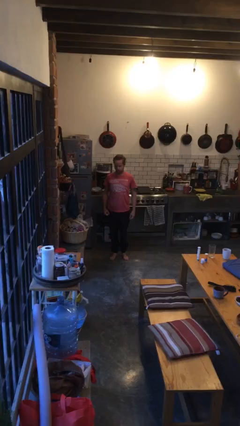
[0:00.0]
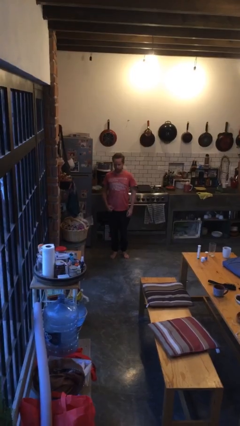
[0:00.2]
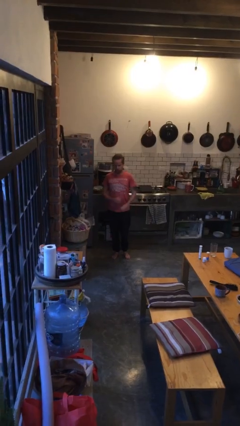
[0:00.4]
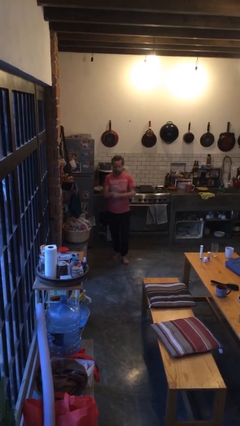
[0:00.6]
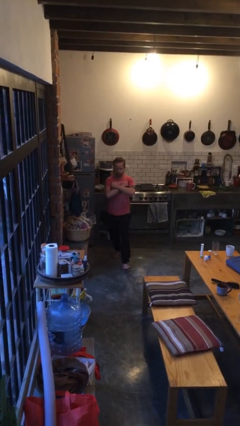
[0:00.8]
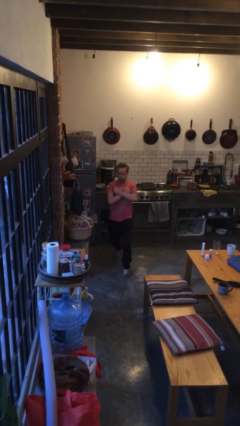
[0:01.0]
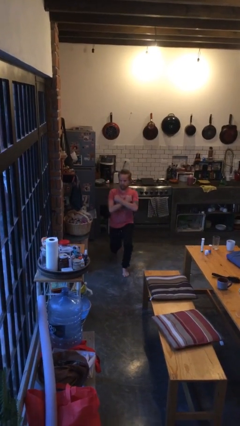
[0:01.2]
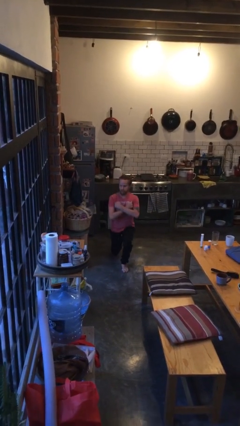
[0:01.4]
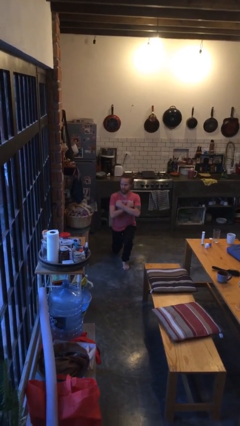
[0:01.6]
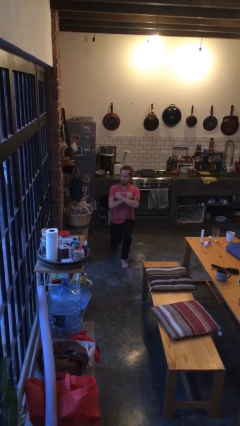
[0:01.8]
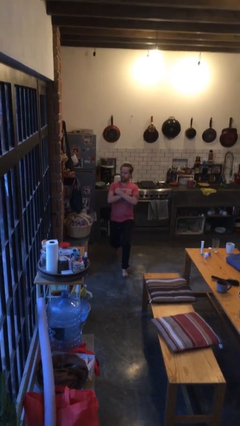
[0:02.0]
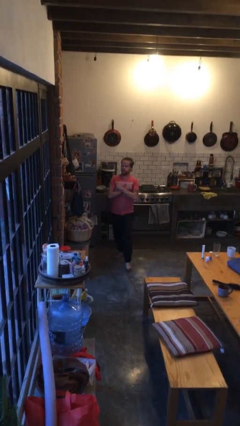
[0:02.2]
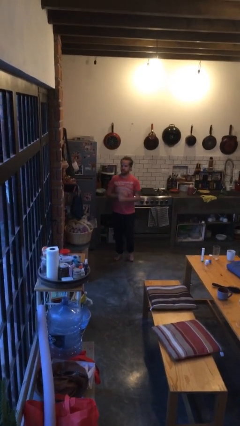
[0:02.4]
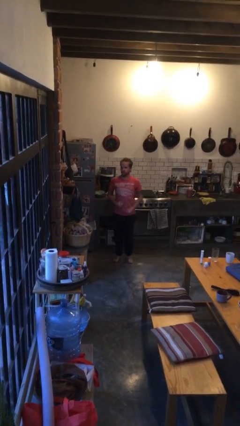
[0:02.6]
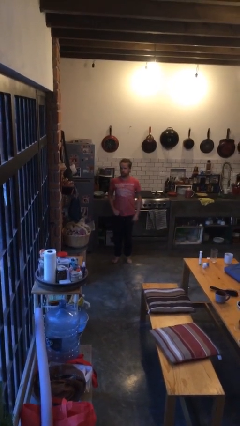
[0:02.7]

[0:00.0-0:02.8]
person exercises with lunges

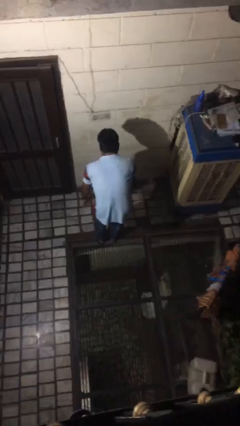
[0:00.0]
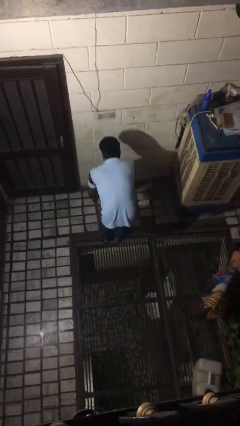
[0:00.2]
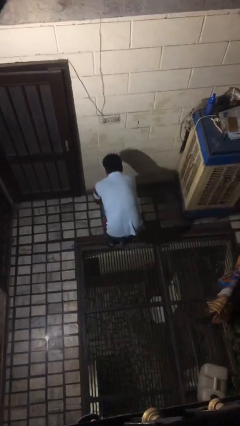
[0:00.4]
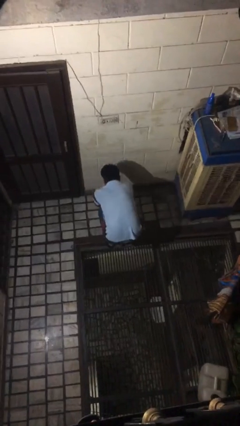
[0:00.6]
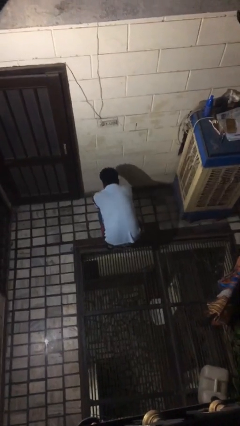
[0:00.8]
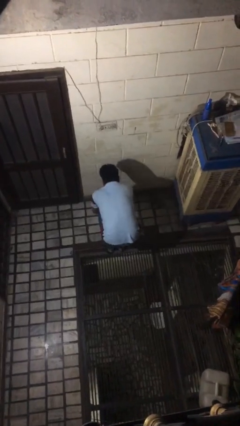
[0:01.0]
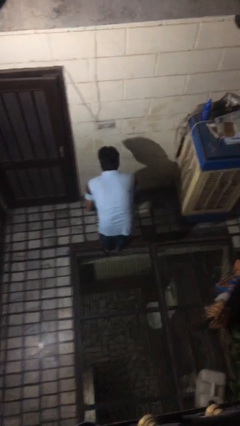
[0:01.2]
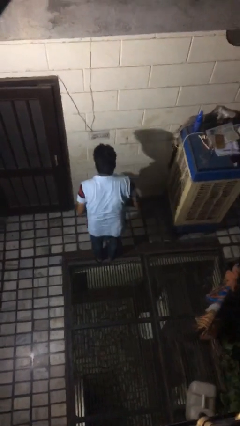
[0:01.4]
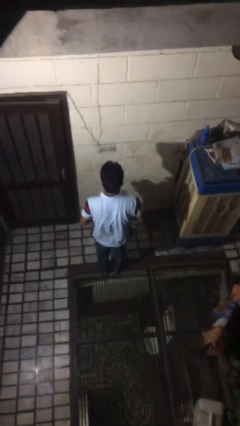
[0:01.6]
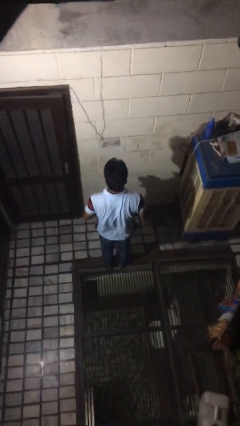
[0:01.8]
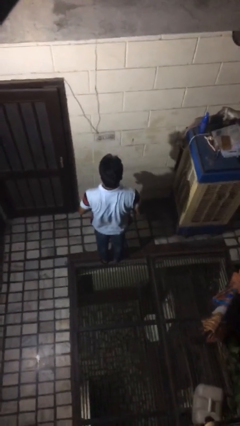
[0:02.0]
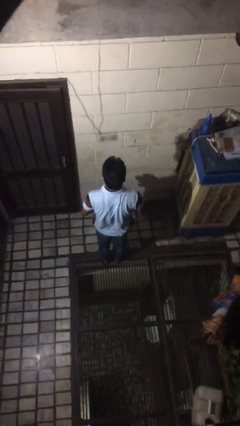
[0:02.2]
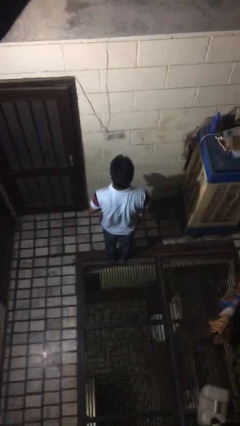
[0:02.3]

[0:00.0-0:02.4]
person picks up object from floor

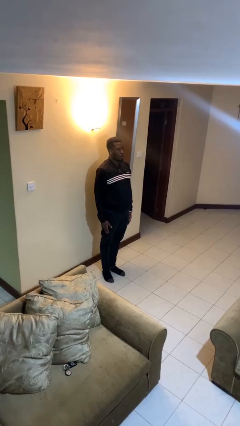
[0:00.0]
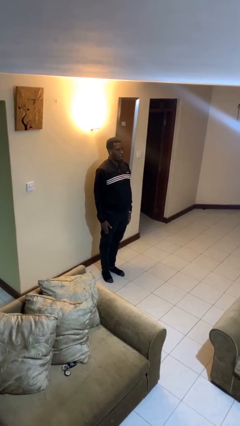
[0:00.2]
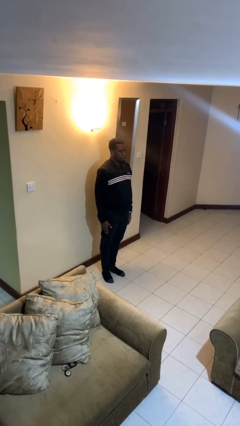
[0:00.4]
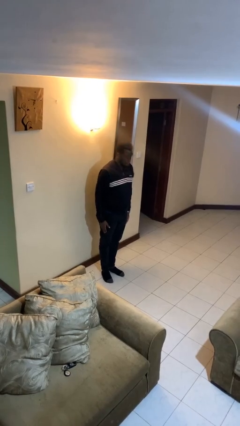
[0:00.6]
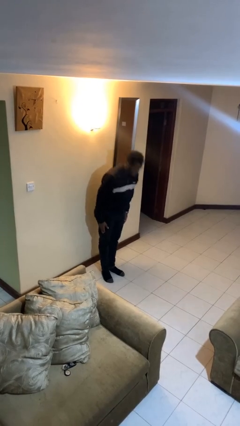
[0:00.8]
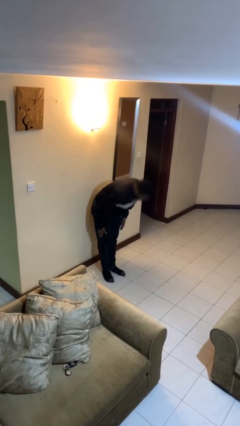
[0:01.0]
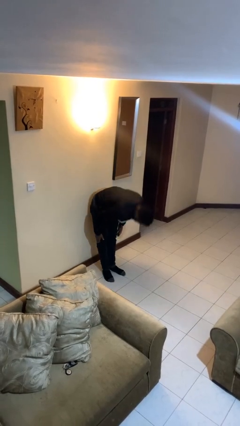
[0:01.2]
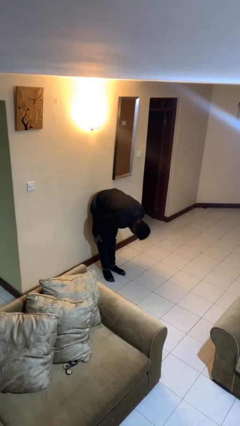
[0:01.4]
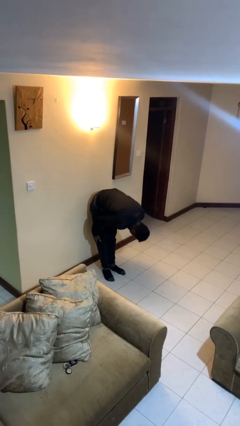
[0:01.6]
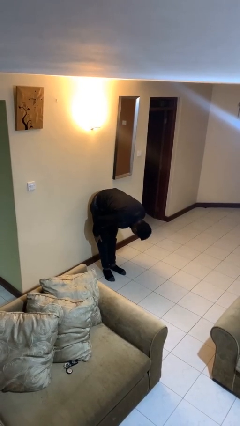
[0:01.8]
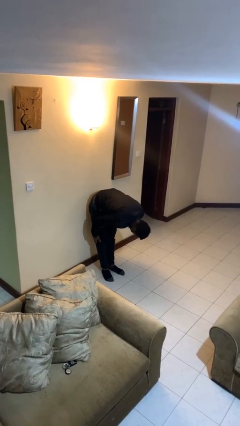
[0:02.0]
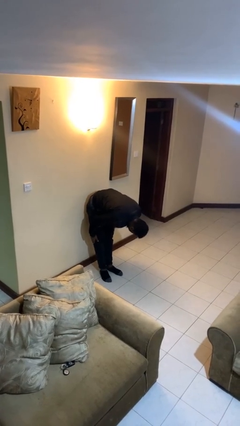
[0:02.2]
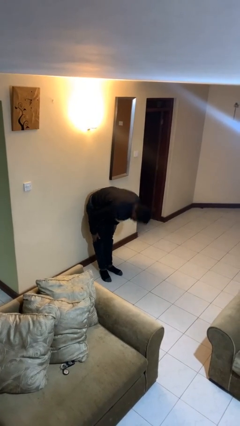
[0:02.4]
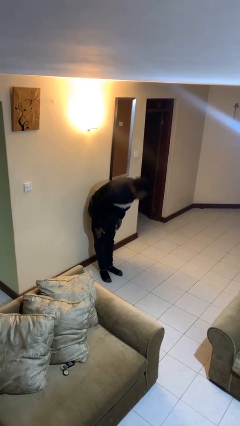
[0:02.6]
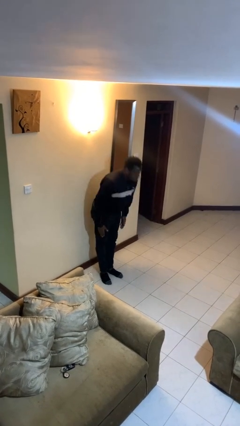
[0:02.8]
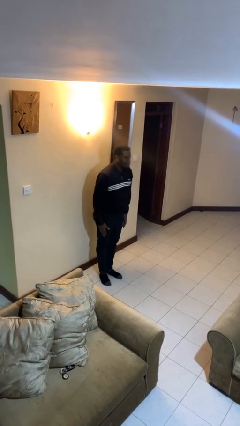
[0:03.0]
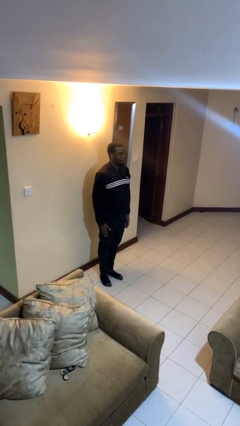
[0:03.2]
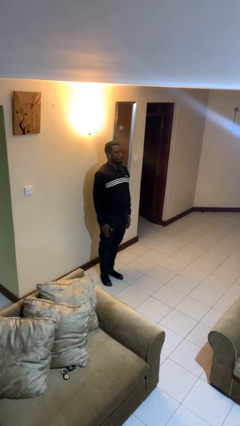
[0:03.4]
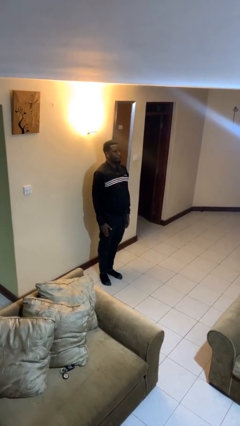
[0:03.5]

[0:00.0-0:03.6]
person bows

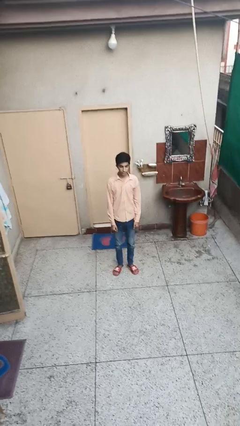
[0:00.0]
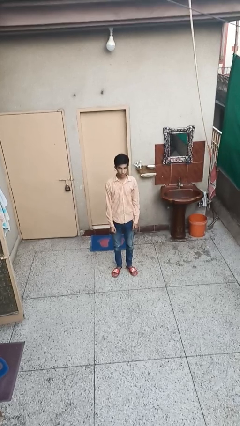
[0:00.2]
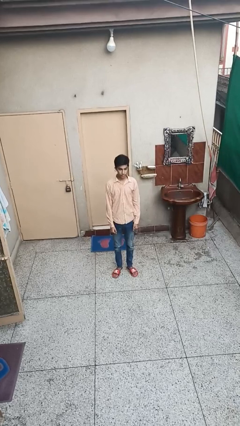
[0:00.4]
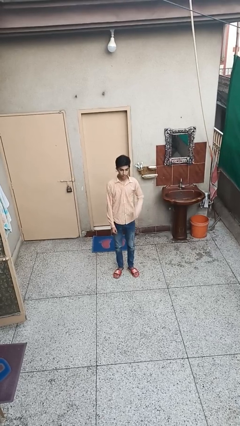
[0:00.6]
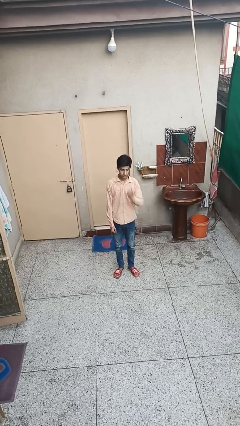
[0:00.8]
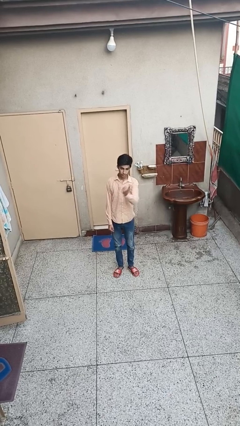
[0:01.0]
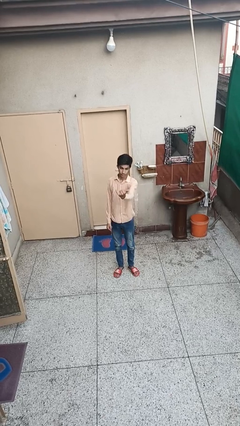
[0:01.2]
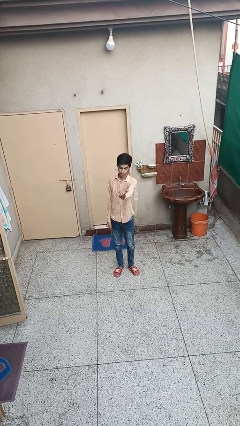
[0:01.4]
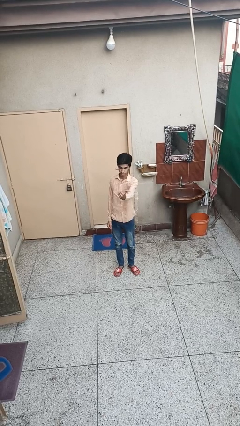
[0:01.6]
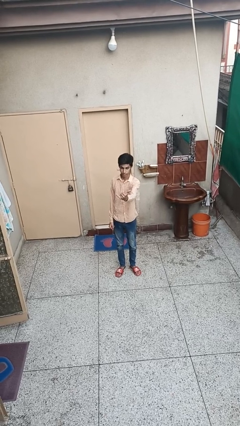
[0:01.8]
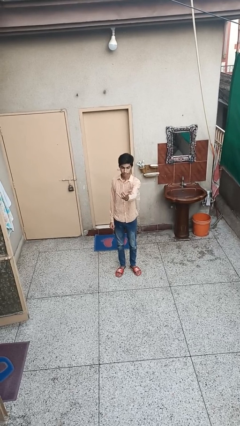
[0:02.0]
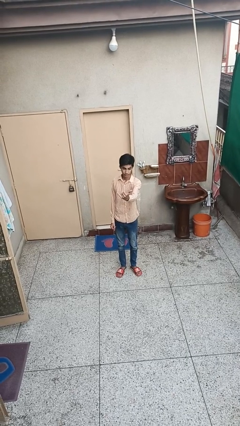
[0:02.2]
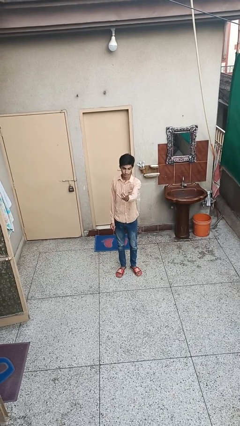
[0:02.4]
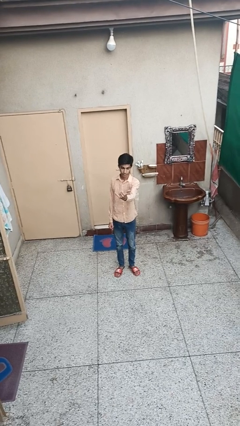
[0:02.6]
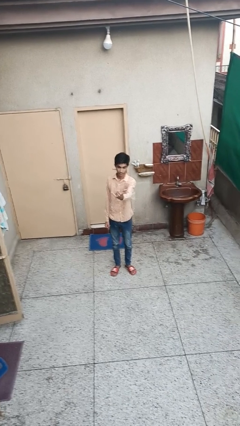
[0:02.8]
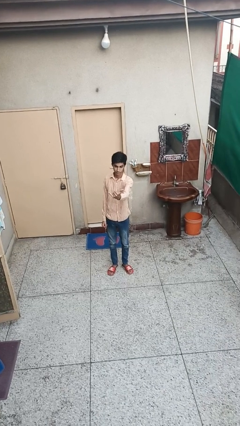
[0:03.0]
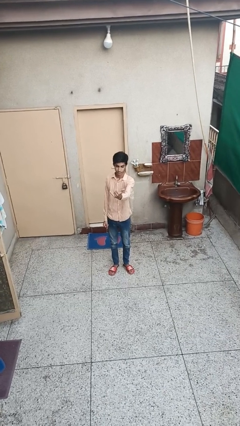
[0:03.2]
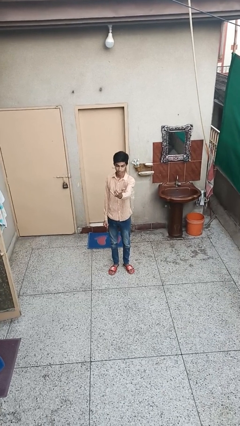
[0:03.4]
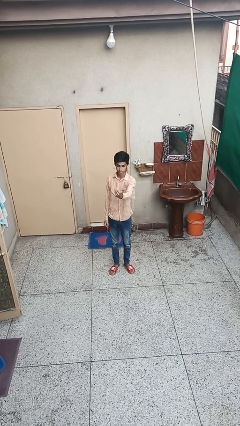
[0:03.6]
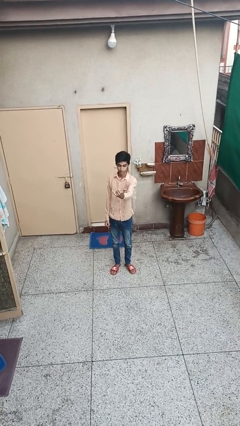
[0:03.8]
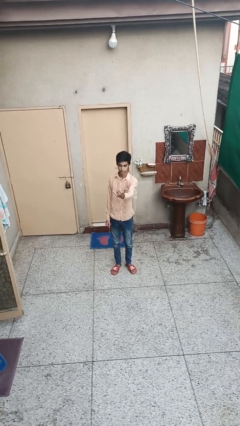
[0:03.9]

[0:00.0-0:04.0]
person gestures hang loose

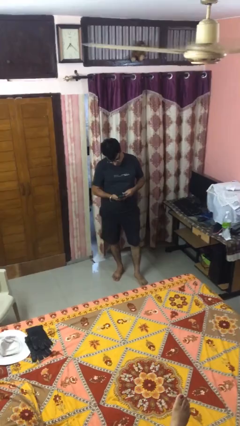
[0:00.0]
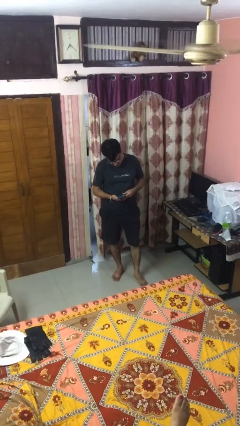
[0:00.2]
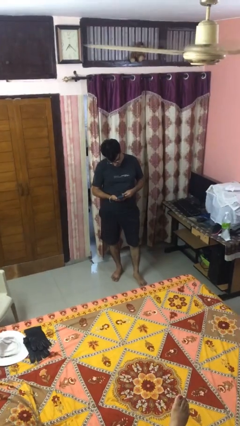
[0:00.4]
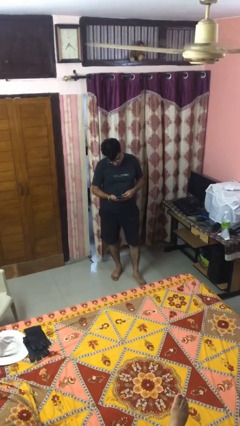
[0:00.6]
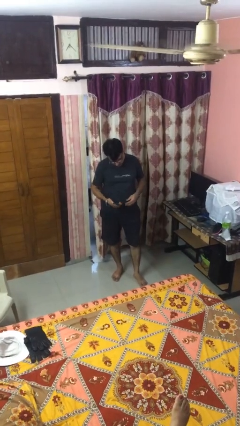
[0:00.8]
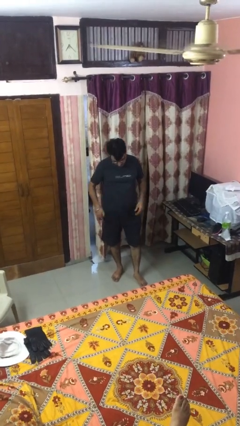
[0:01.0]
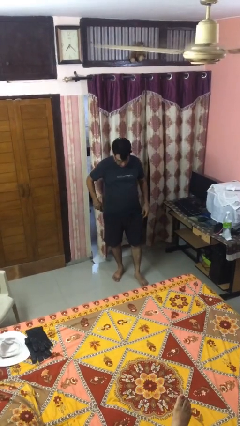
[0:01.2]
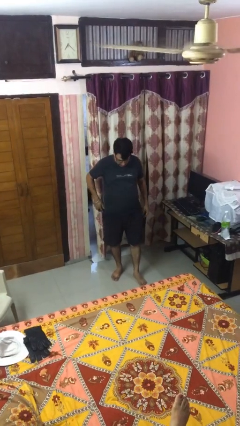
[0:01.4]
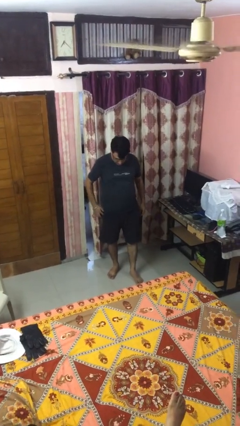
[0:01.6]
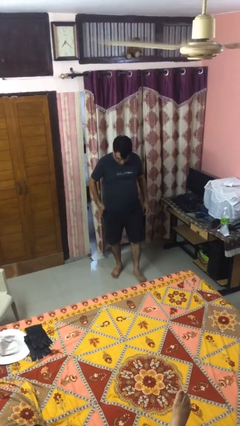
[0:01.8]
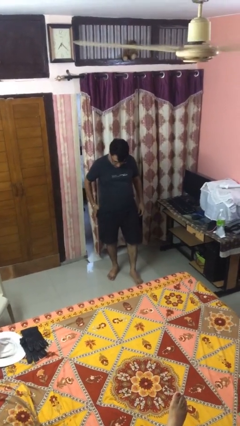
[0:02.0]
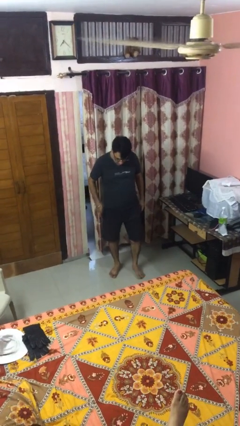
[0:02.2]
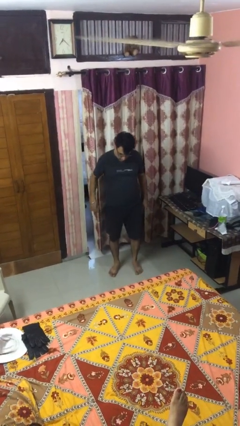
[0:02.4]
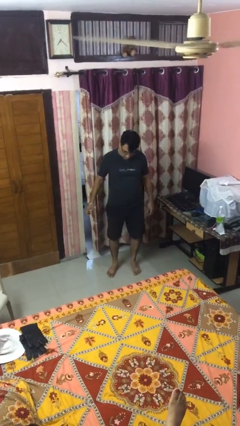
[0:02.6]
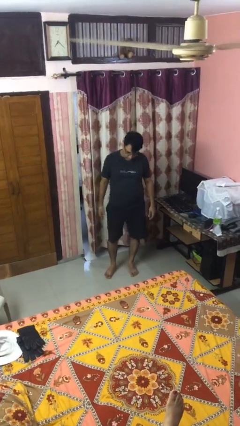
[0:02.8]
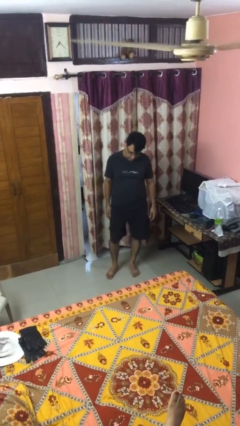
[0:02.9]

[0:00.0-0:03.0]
person puts phone into pocket

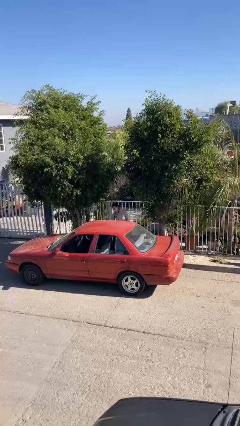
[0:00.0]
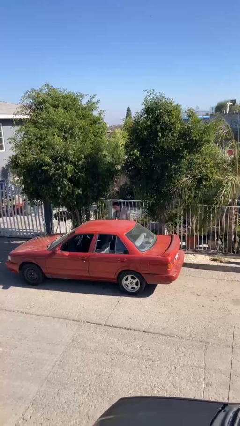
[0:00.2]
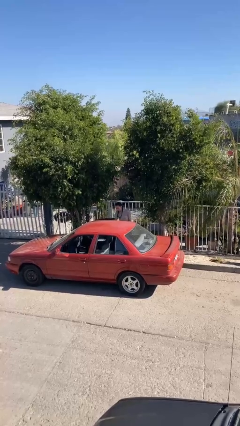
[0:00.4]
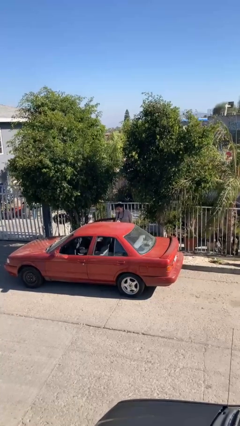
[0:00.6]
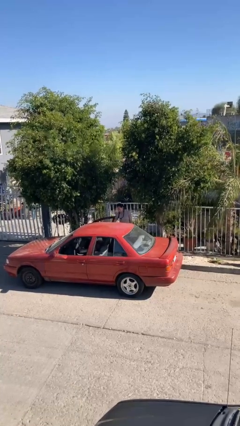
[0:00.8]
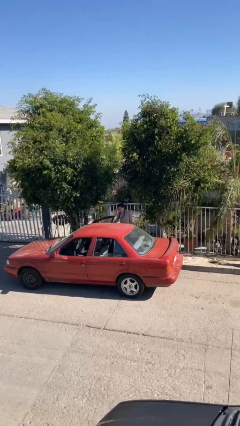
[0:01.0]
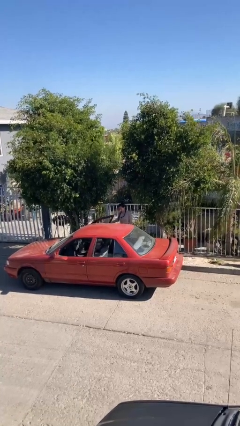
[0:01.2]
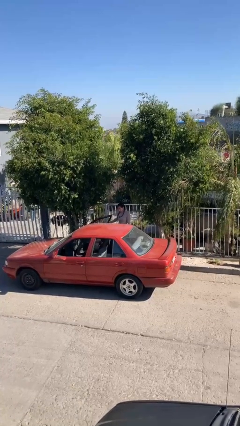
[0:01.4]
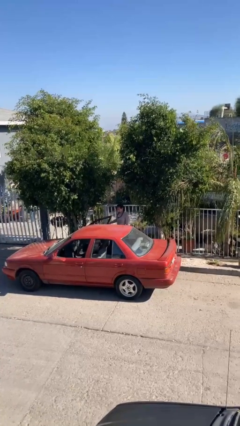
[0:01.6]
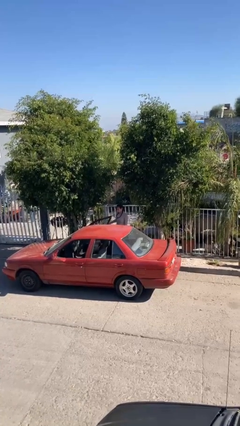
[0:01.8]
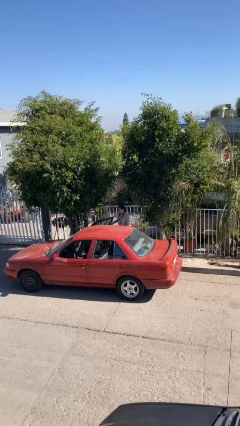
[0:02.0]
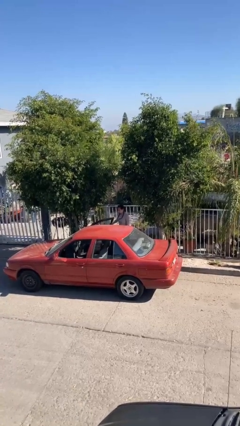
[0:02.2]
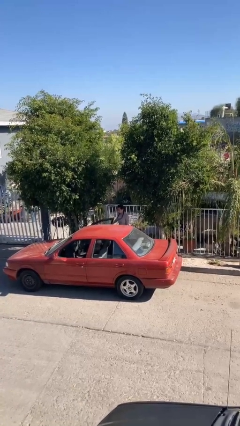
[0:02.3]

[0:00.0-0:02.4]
person opens car door
